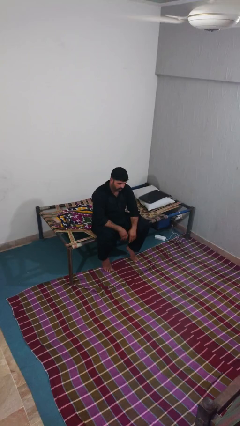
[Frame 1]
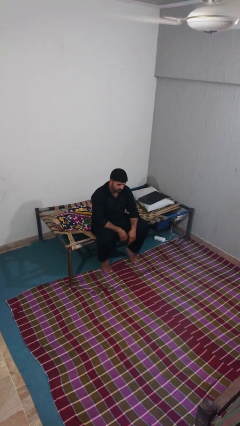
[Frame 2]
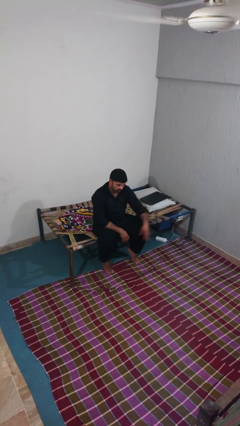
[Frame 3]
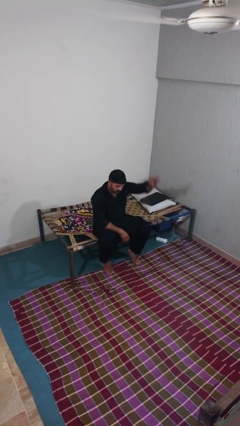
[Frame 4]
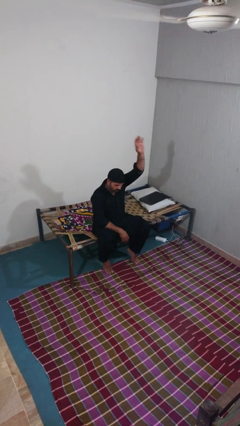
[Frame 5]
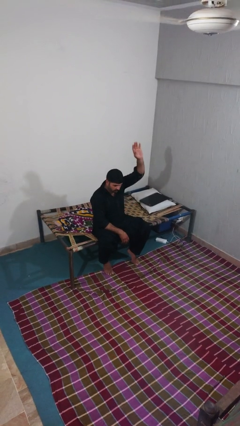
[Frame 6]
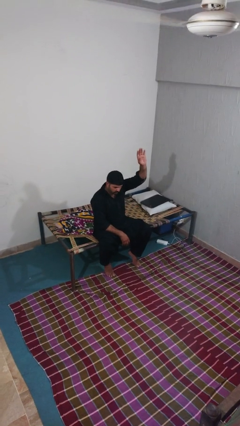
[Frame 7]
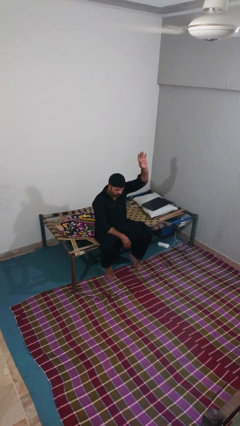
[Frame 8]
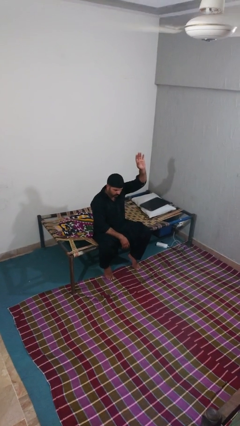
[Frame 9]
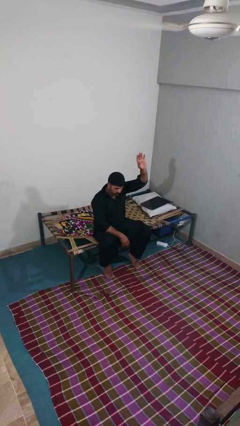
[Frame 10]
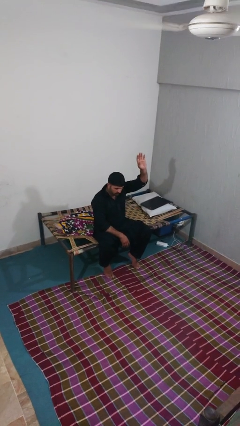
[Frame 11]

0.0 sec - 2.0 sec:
person gestures raise hand

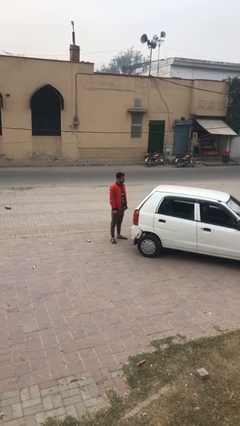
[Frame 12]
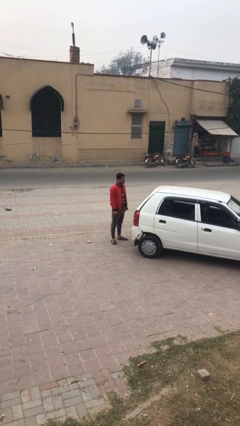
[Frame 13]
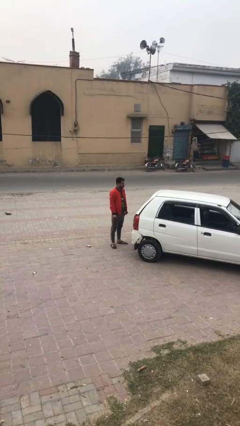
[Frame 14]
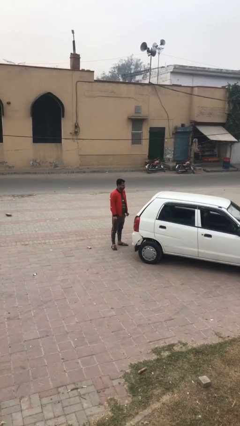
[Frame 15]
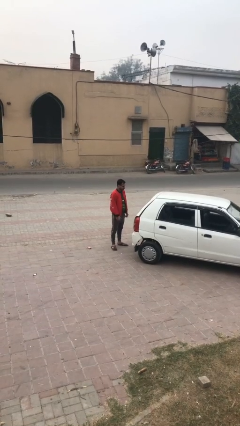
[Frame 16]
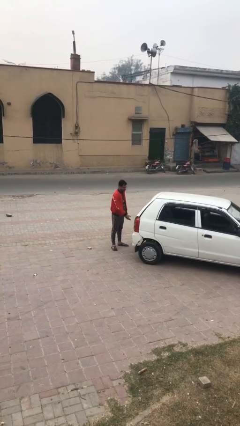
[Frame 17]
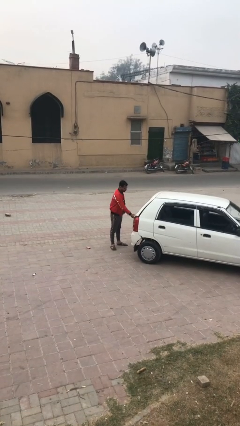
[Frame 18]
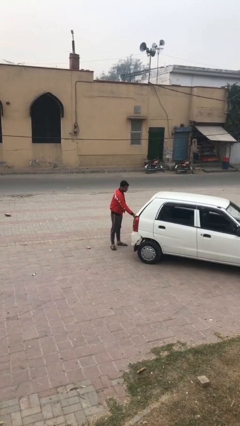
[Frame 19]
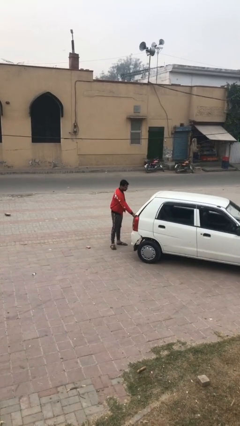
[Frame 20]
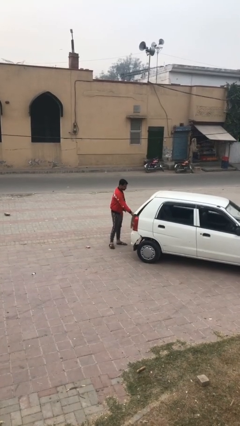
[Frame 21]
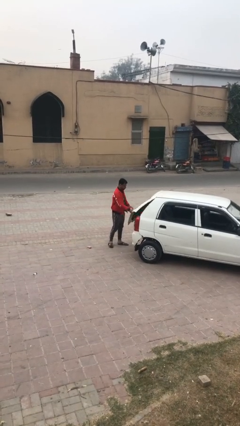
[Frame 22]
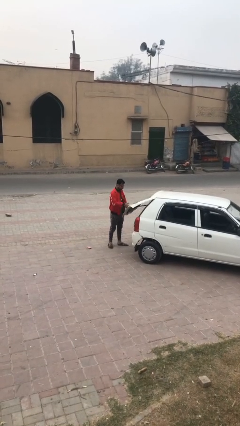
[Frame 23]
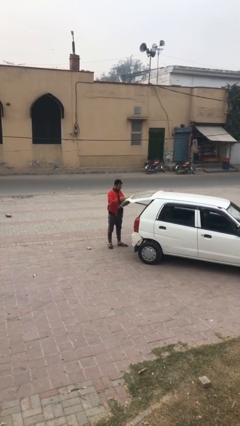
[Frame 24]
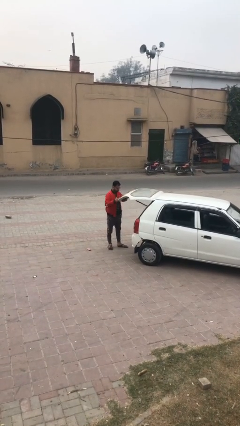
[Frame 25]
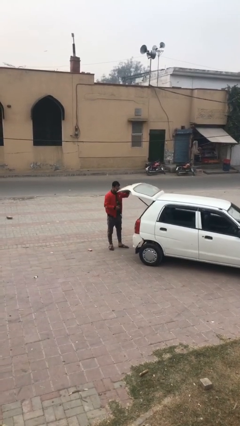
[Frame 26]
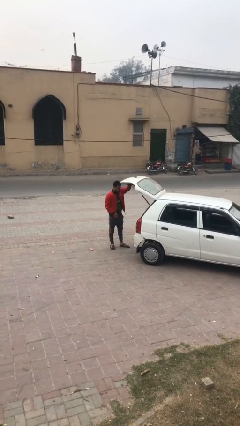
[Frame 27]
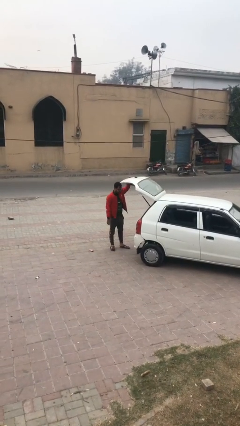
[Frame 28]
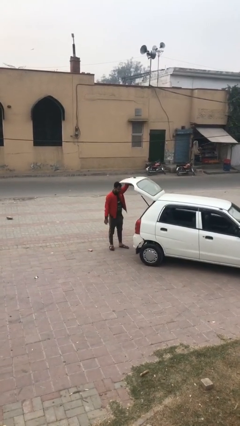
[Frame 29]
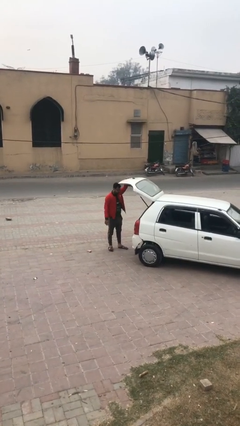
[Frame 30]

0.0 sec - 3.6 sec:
person opens car trunk

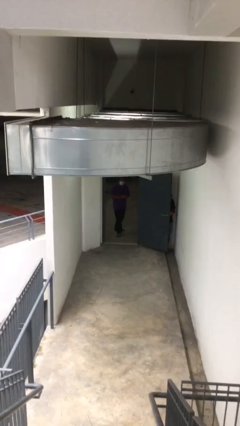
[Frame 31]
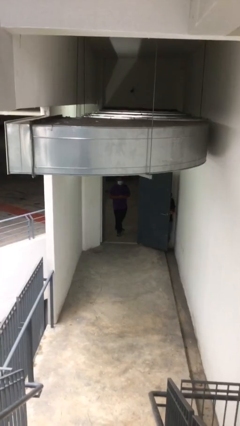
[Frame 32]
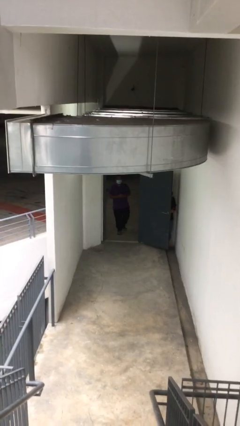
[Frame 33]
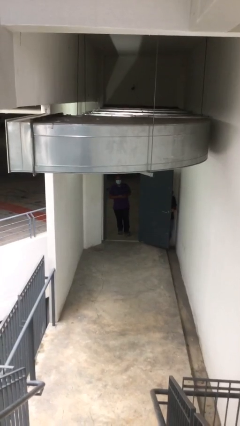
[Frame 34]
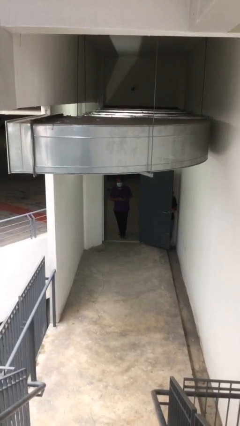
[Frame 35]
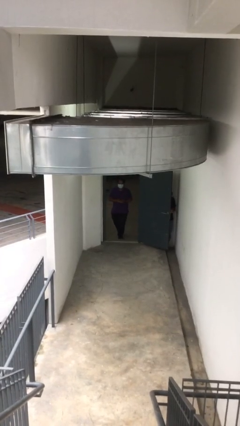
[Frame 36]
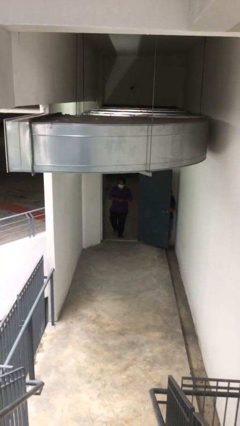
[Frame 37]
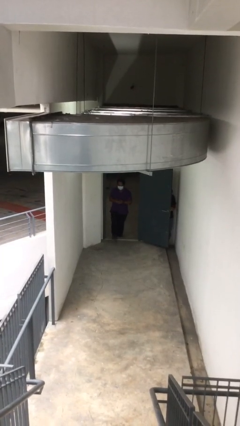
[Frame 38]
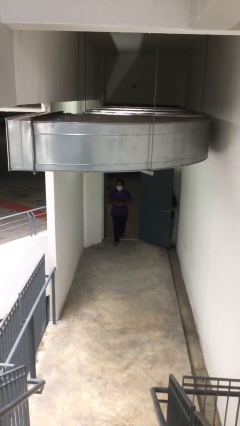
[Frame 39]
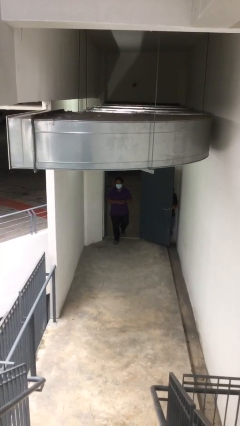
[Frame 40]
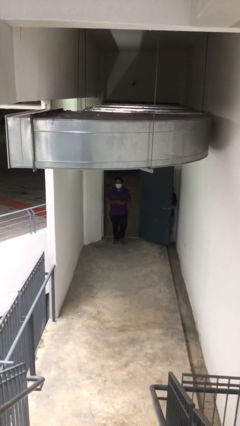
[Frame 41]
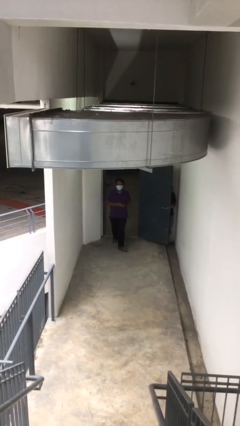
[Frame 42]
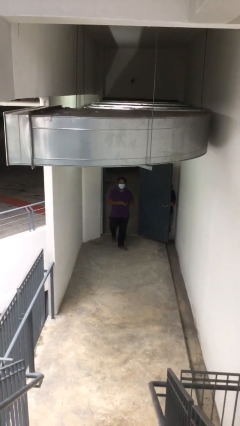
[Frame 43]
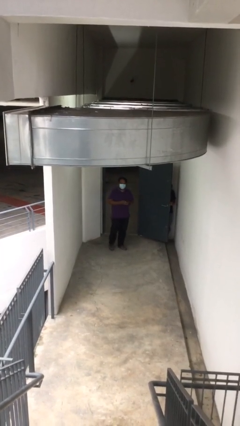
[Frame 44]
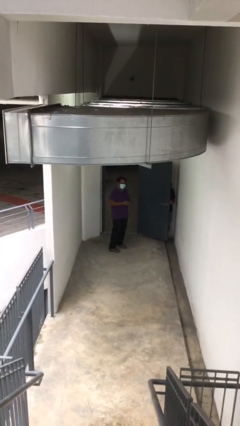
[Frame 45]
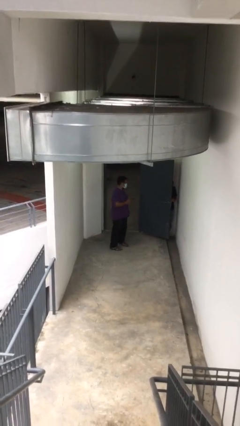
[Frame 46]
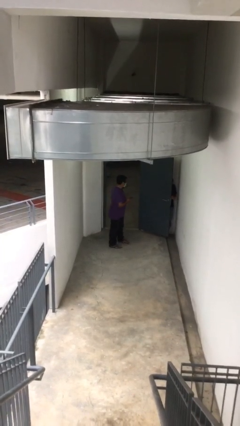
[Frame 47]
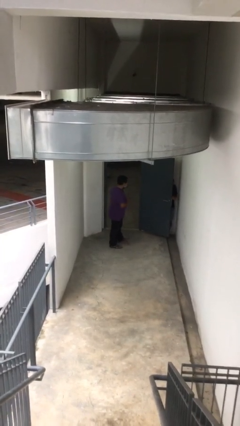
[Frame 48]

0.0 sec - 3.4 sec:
person enters scene through structure

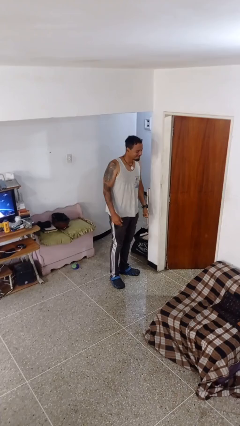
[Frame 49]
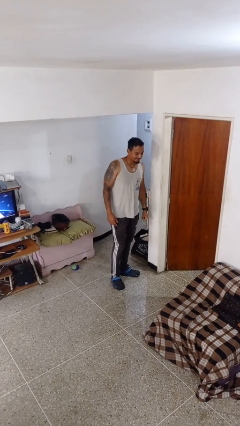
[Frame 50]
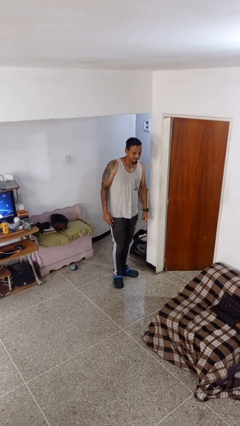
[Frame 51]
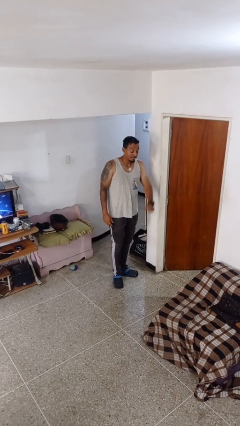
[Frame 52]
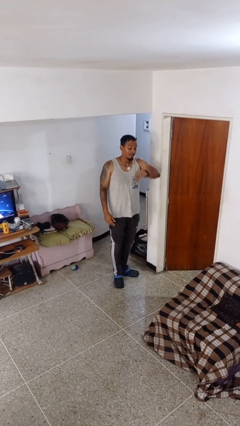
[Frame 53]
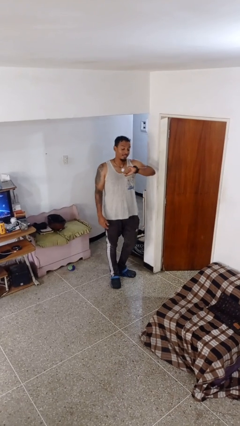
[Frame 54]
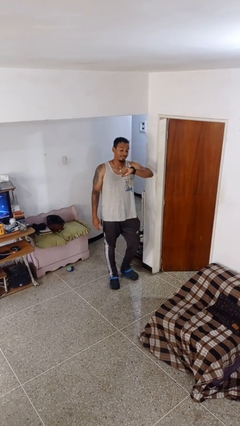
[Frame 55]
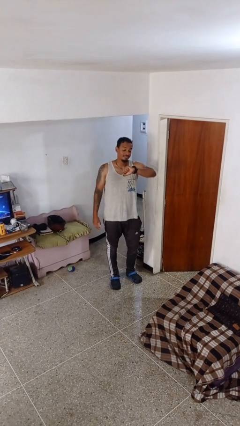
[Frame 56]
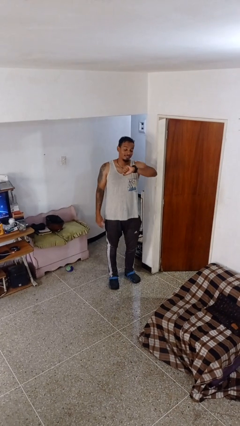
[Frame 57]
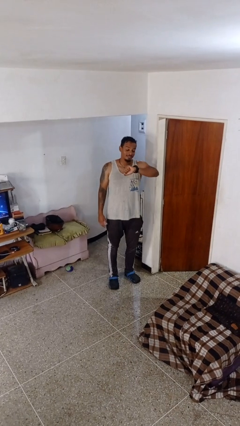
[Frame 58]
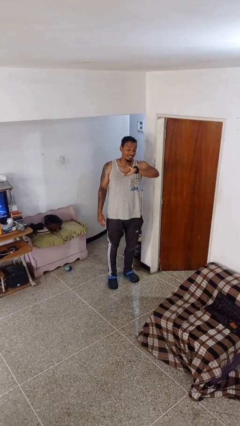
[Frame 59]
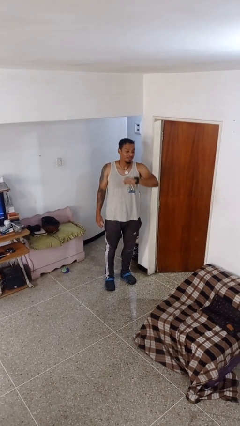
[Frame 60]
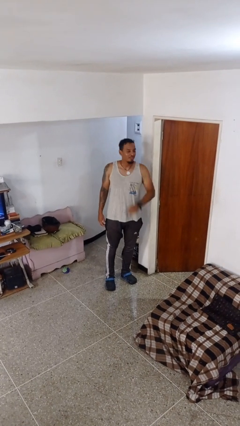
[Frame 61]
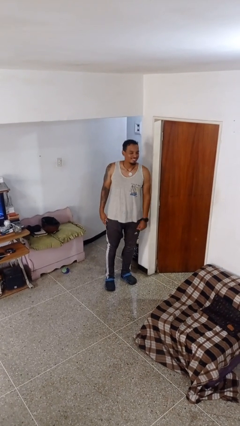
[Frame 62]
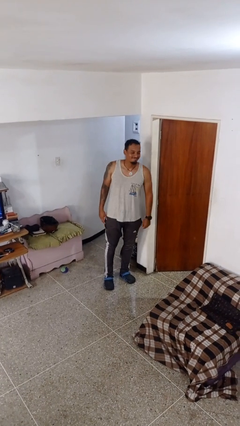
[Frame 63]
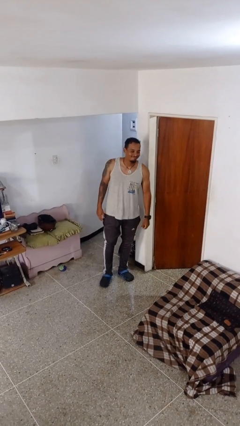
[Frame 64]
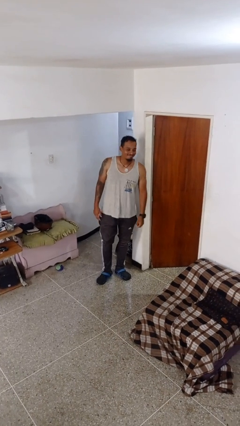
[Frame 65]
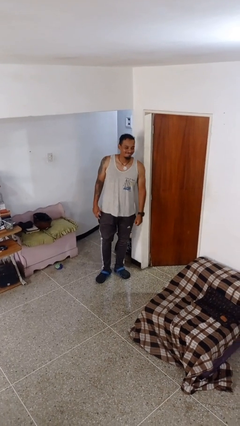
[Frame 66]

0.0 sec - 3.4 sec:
person looks at wristwatch

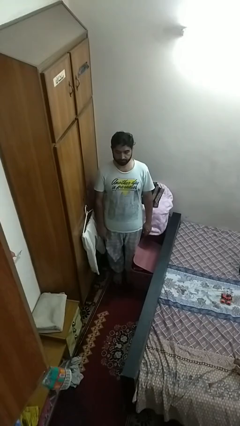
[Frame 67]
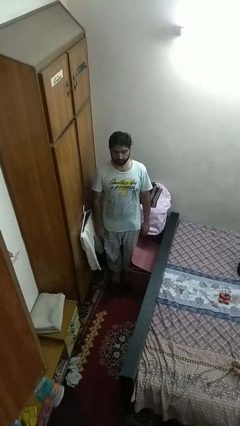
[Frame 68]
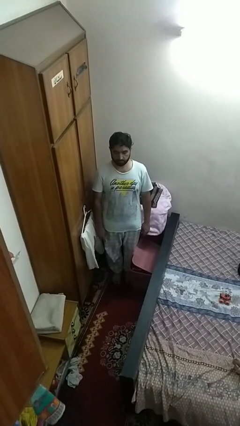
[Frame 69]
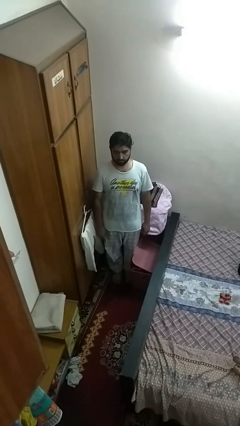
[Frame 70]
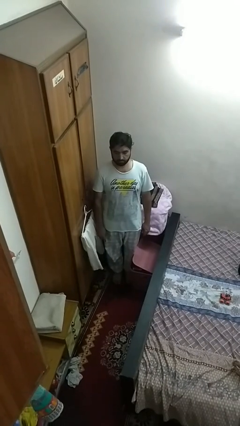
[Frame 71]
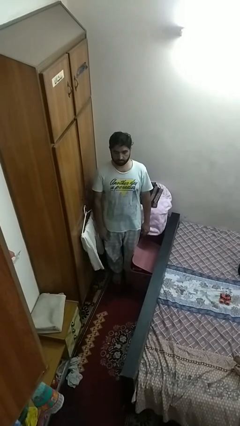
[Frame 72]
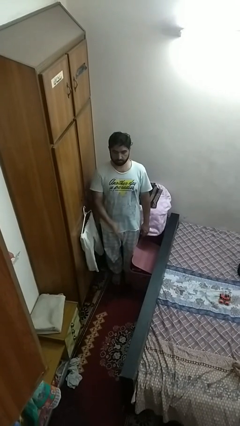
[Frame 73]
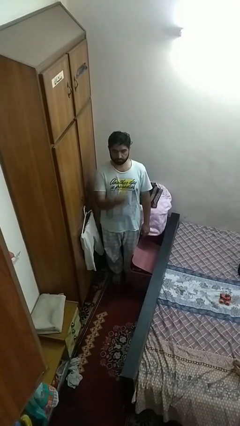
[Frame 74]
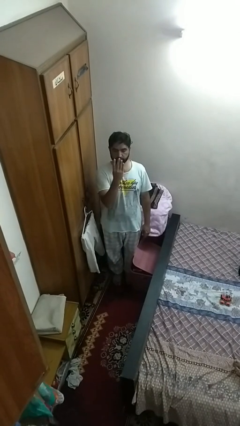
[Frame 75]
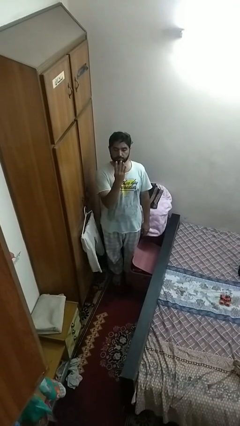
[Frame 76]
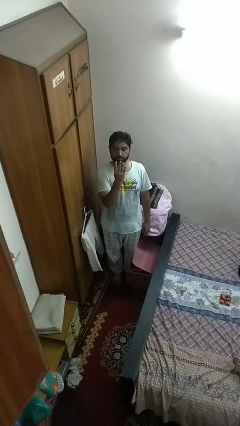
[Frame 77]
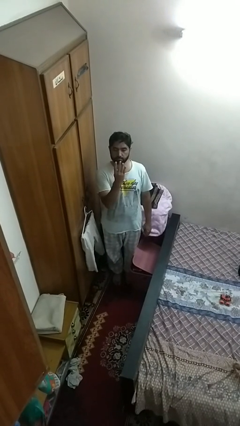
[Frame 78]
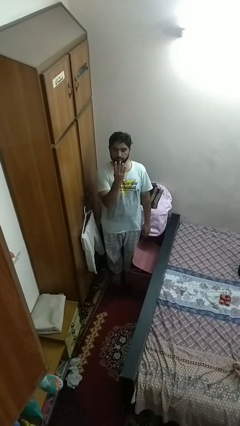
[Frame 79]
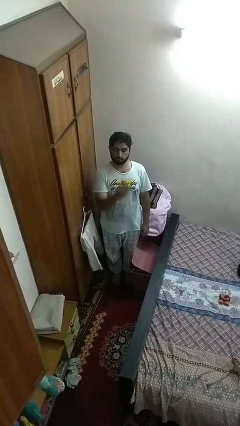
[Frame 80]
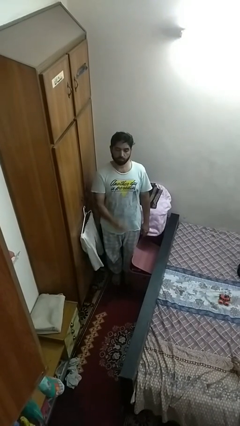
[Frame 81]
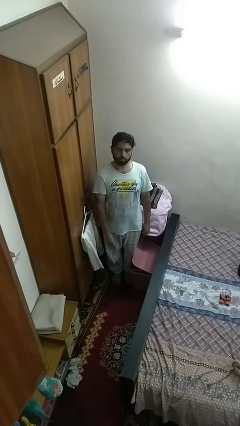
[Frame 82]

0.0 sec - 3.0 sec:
person gestures number four

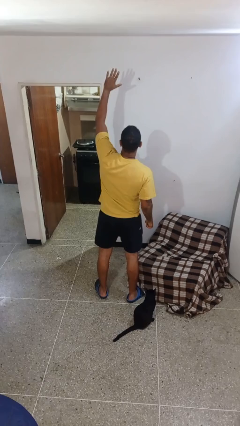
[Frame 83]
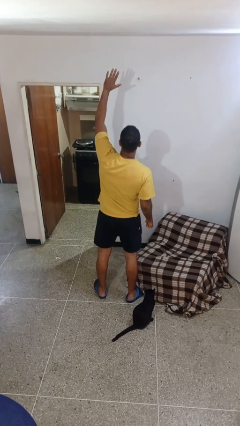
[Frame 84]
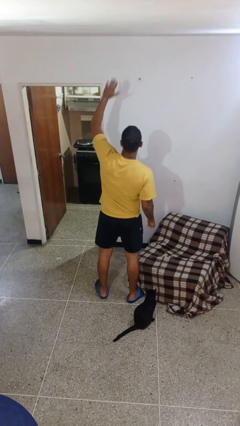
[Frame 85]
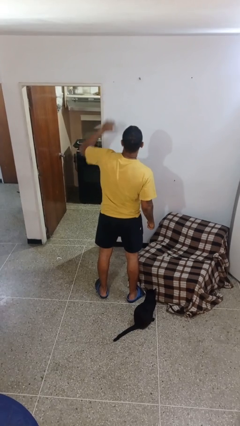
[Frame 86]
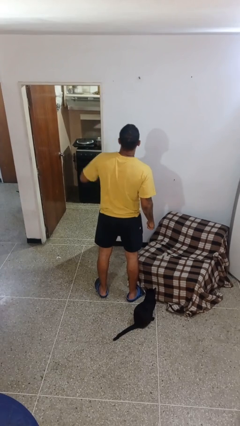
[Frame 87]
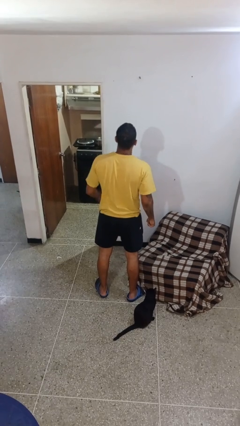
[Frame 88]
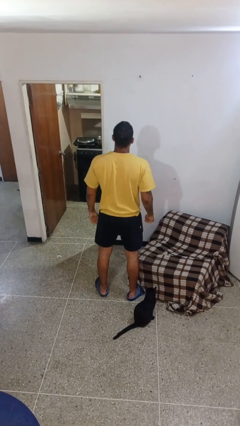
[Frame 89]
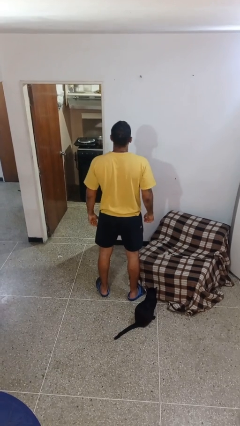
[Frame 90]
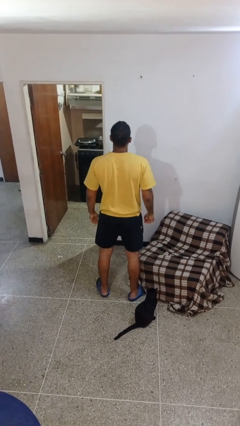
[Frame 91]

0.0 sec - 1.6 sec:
person gestures lower hand

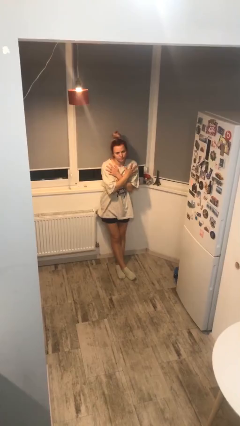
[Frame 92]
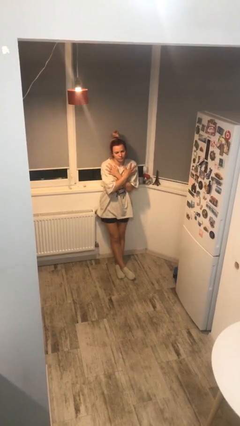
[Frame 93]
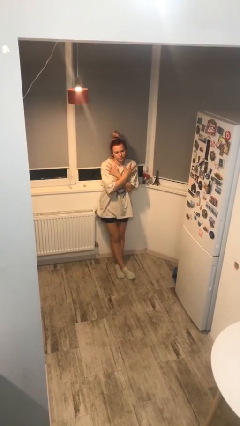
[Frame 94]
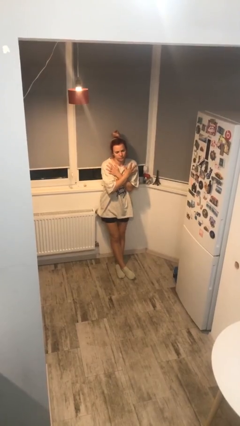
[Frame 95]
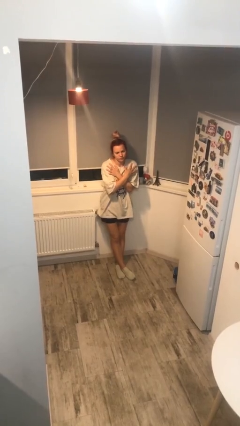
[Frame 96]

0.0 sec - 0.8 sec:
person crosses arms
